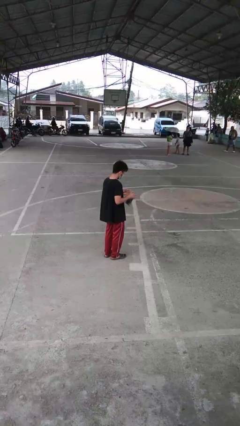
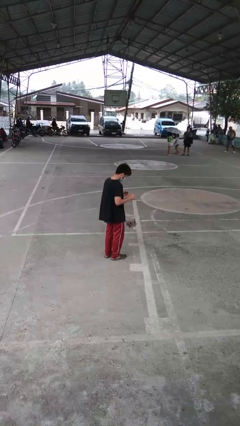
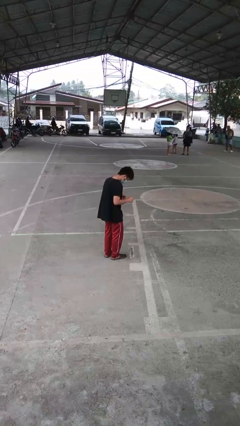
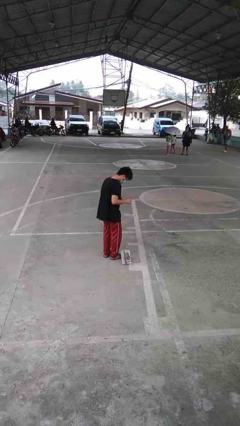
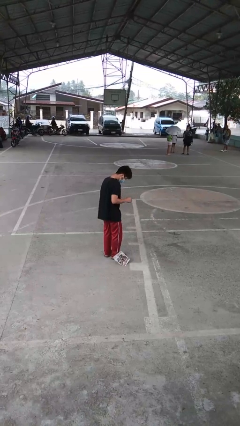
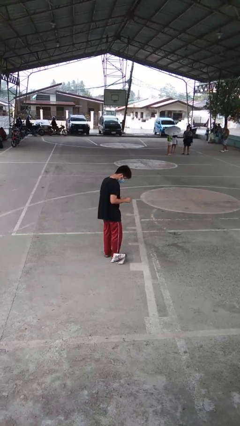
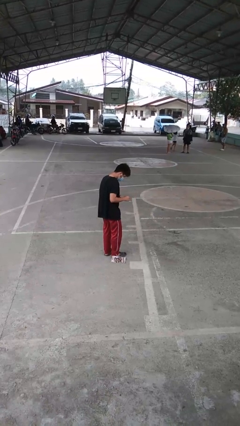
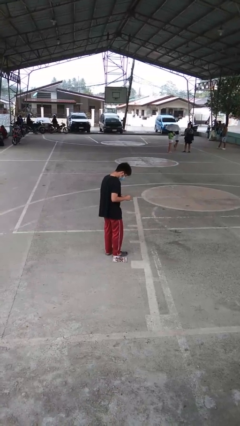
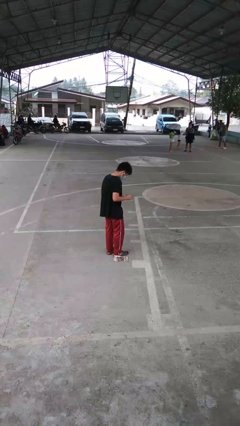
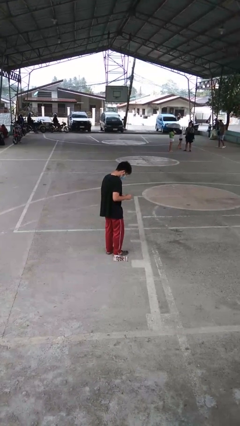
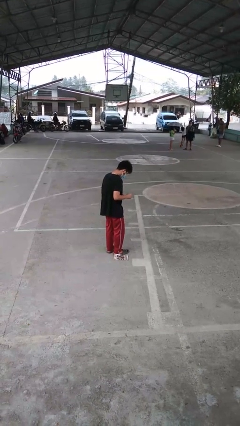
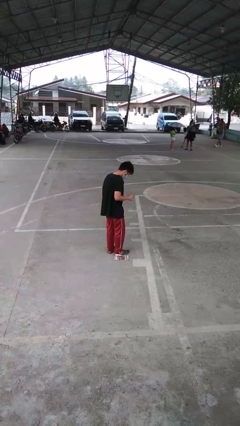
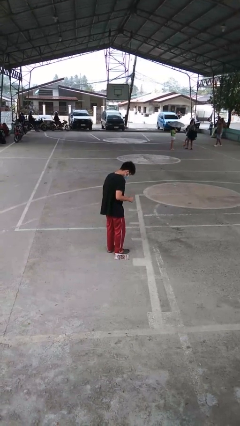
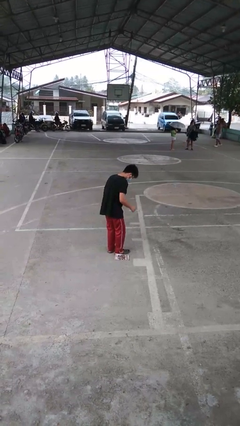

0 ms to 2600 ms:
person drops object

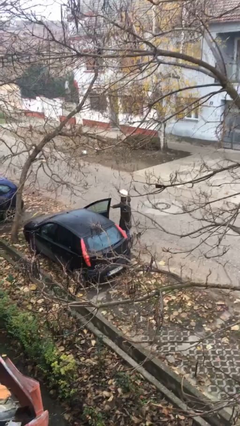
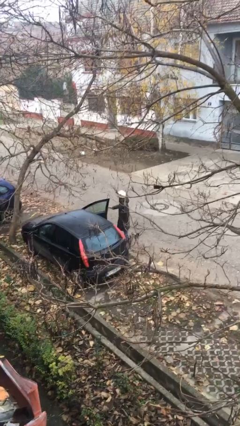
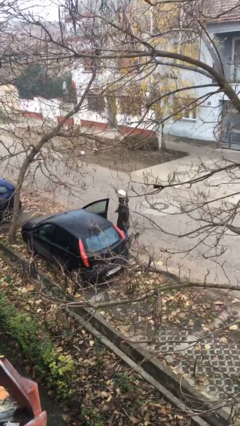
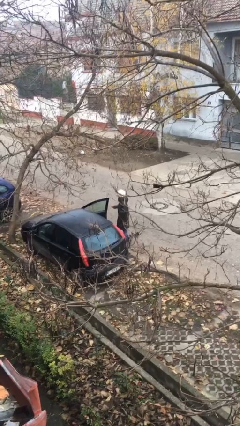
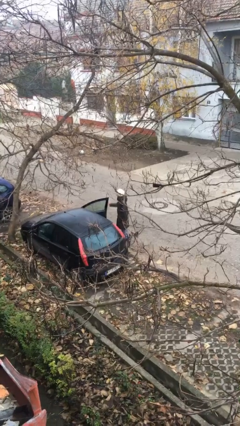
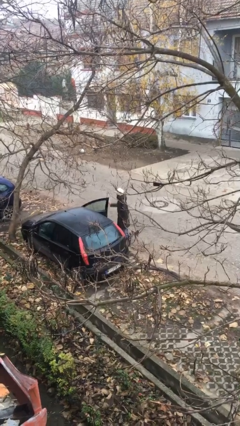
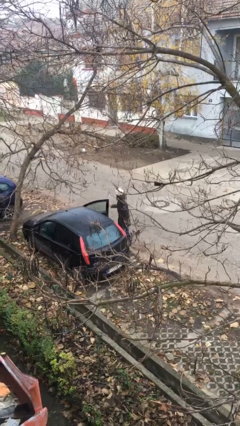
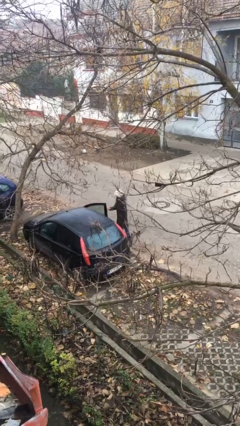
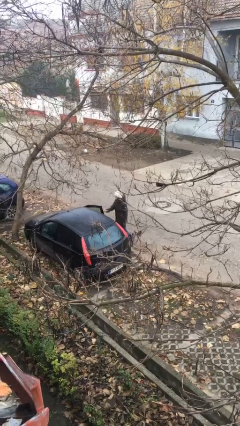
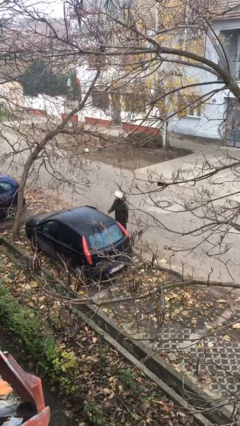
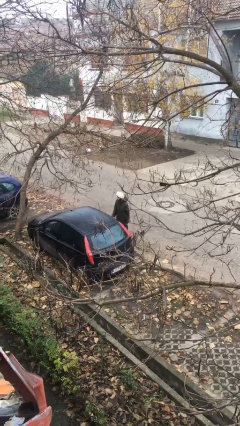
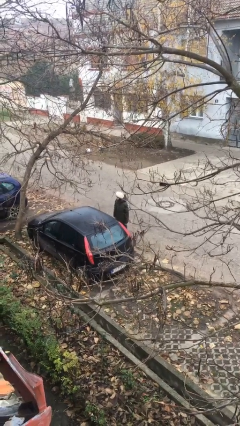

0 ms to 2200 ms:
person closes car door

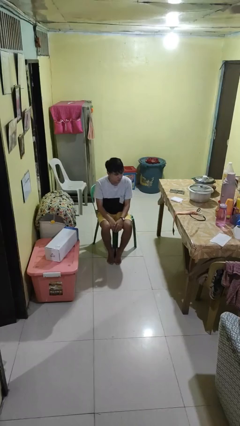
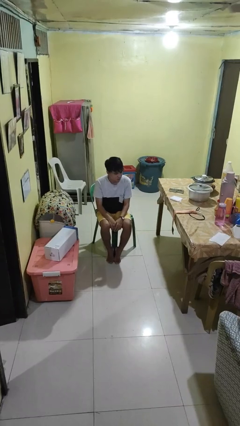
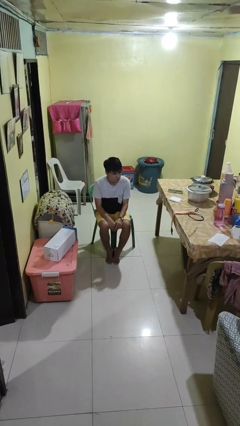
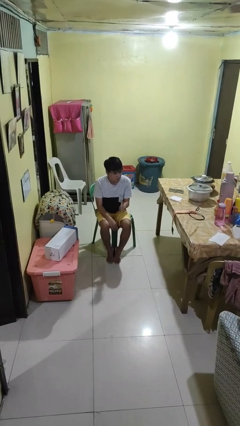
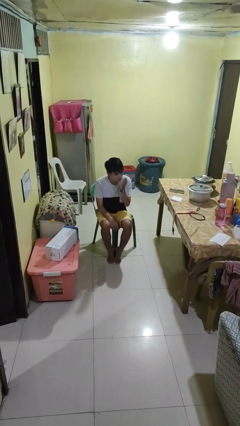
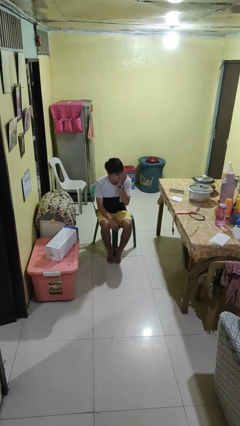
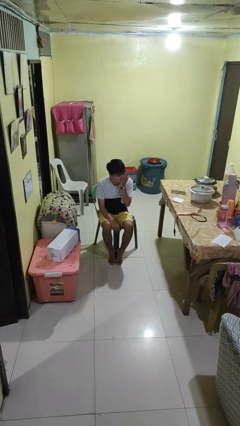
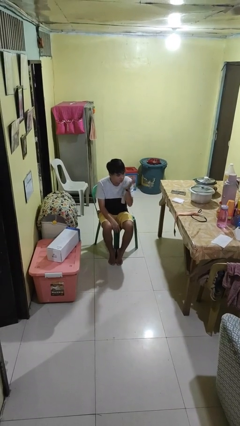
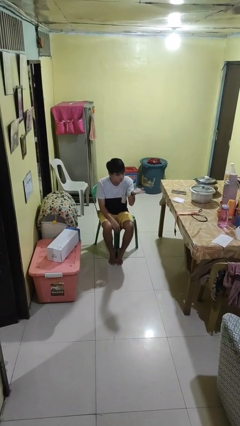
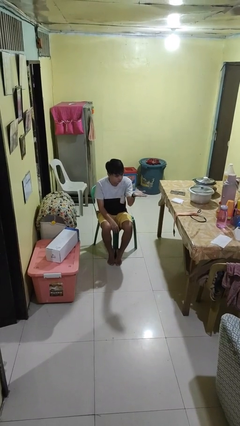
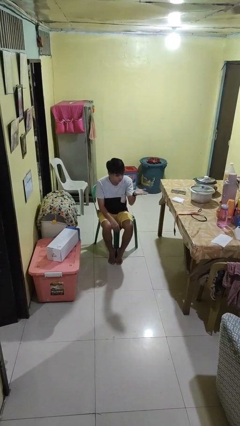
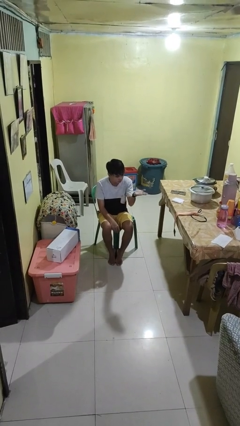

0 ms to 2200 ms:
person gestures blow kiss

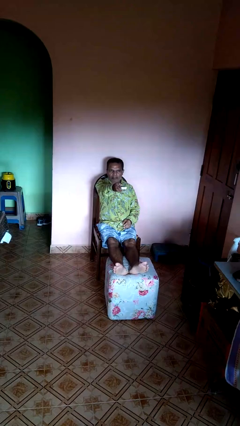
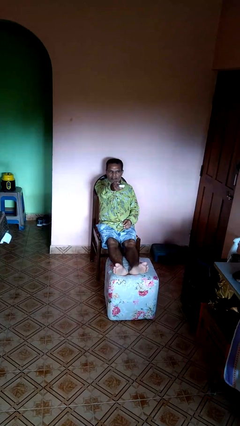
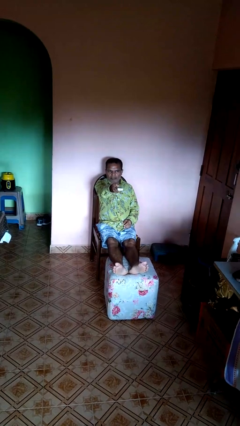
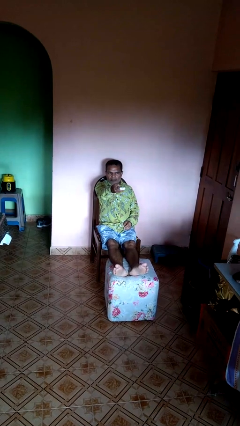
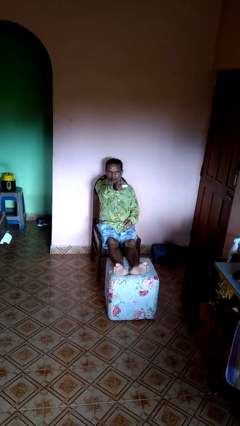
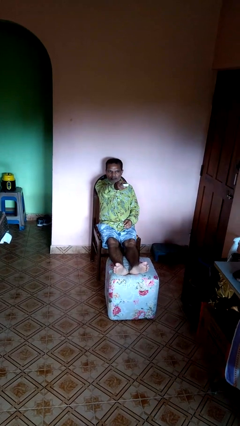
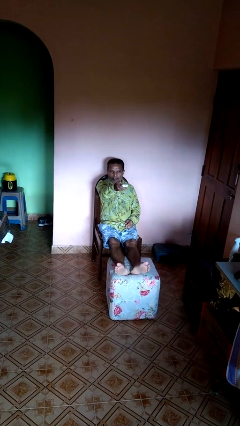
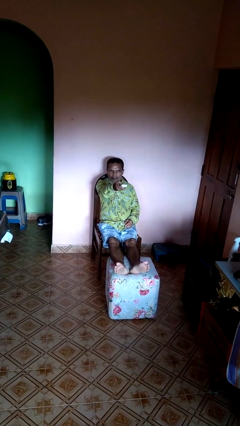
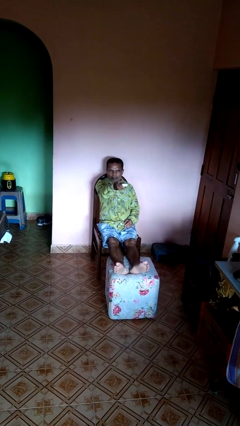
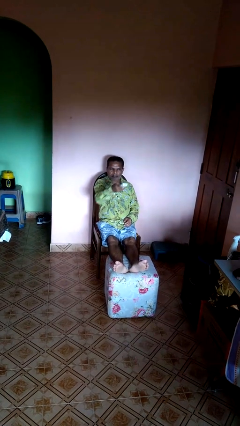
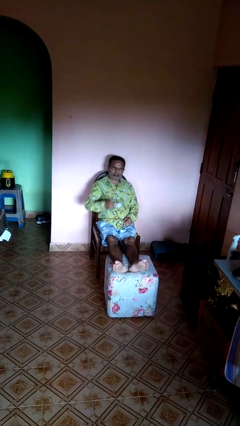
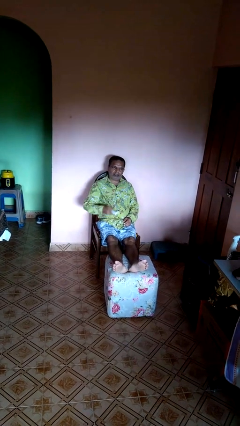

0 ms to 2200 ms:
person uses television remote

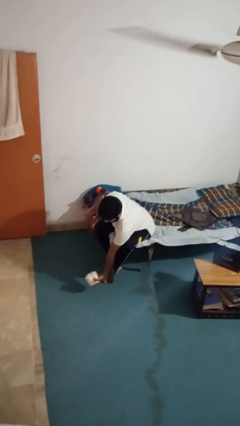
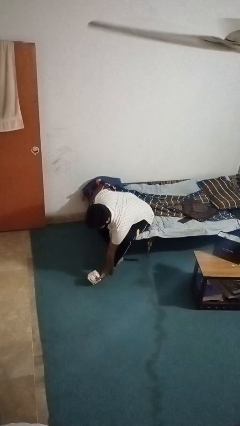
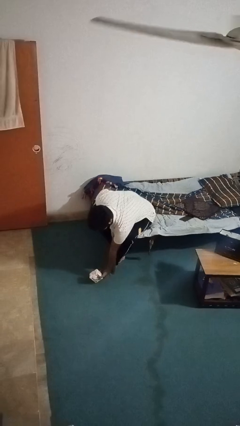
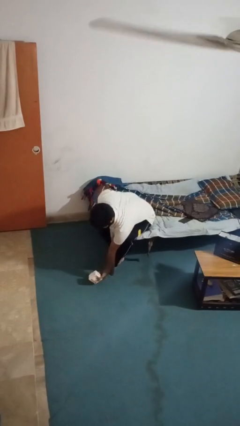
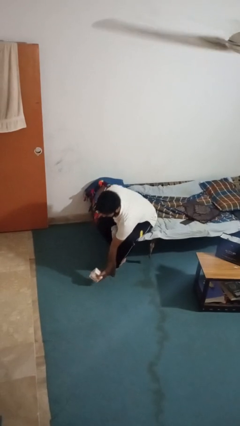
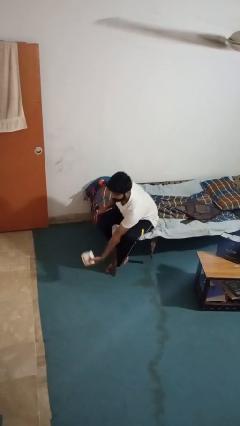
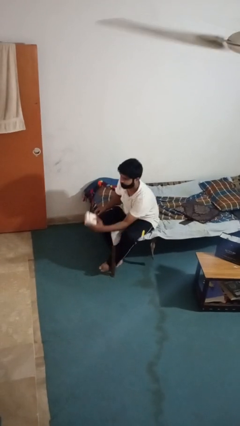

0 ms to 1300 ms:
person catches dropped object

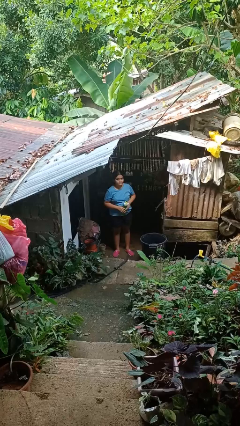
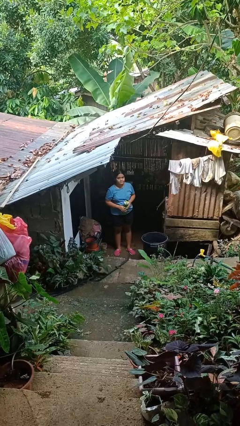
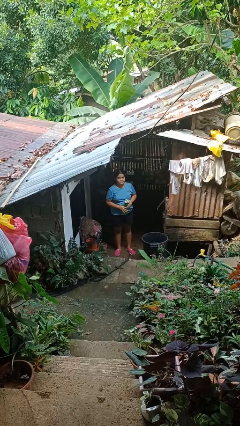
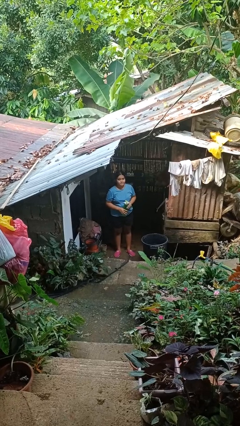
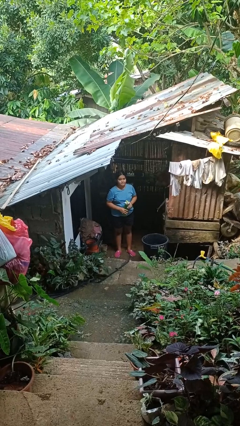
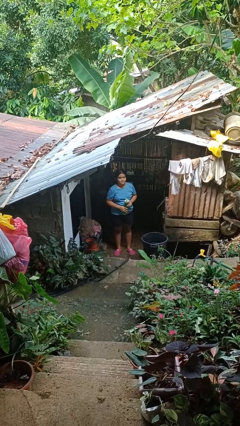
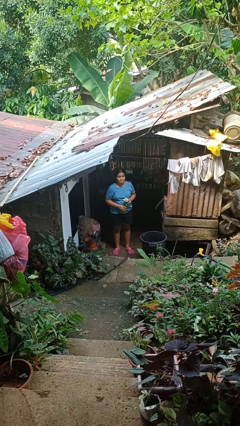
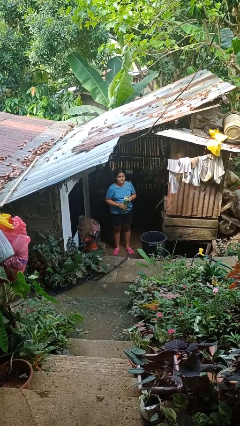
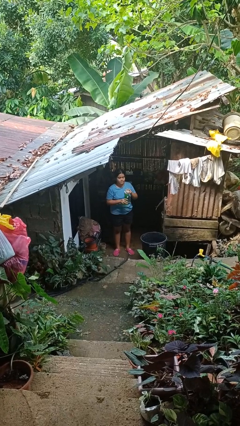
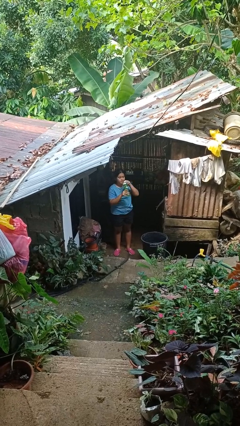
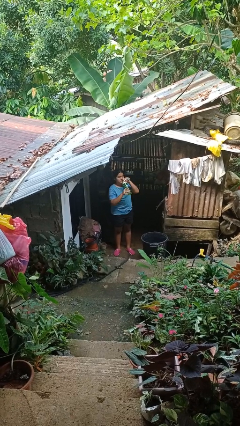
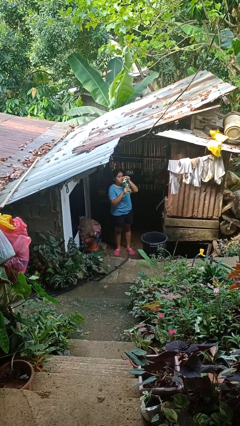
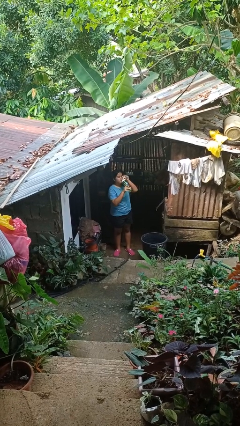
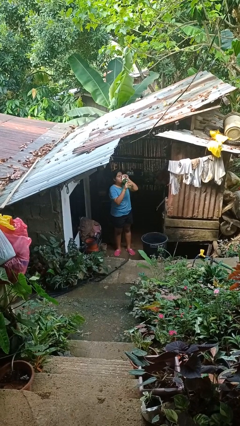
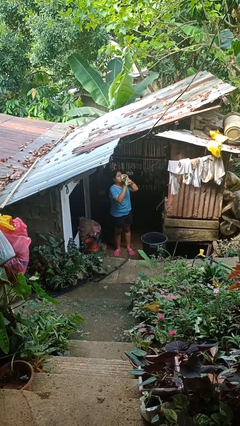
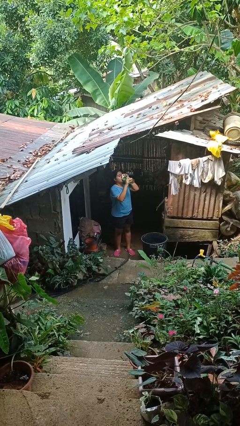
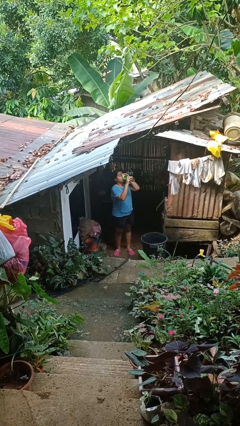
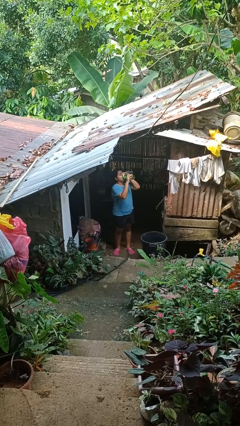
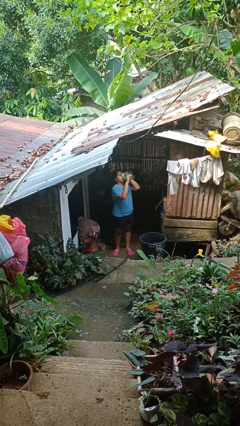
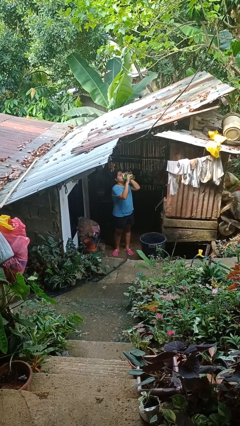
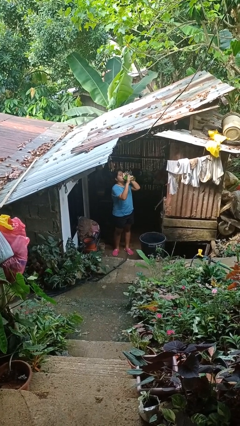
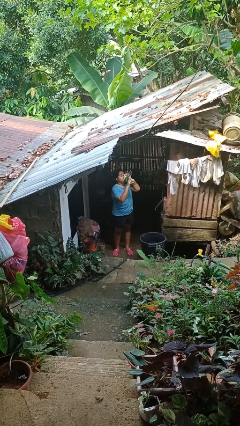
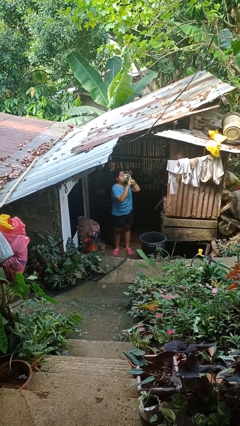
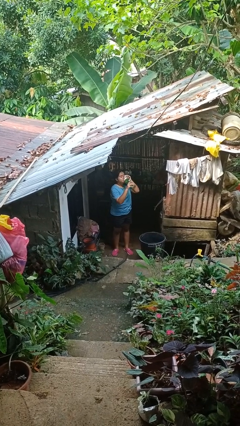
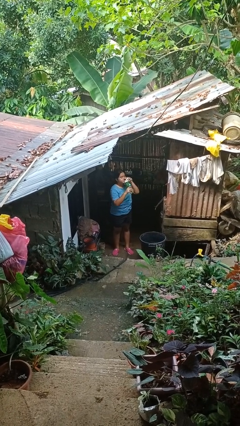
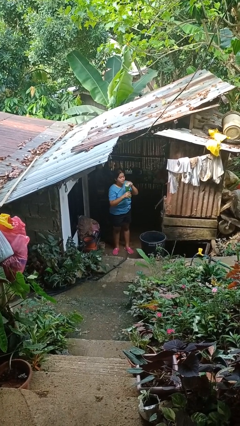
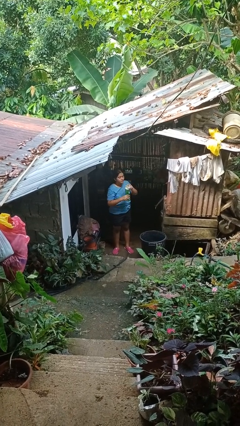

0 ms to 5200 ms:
person drinks from bottle

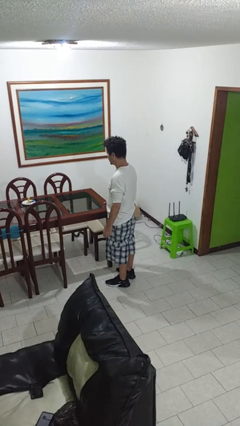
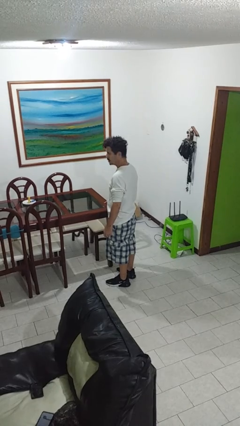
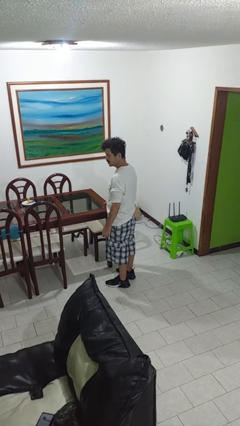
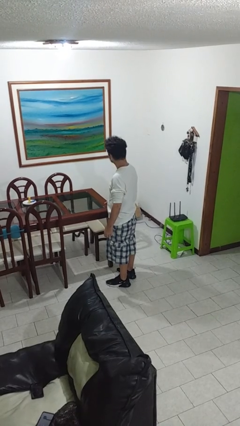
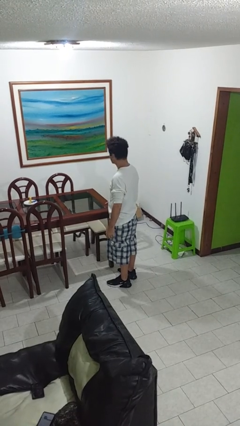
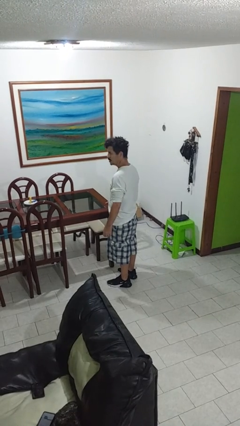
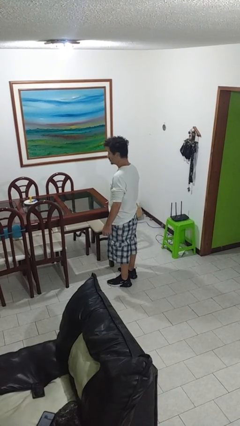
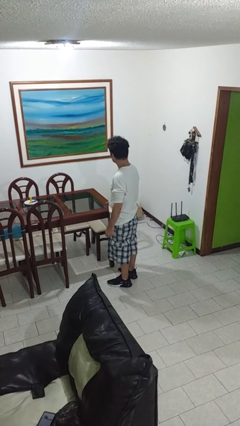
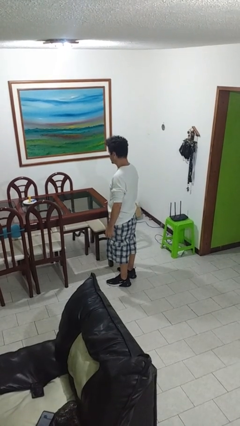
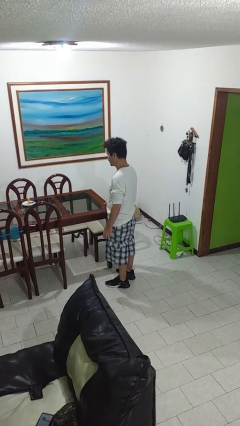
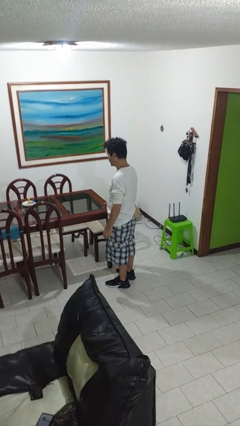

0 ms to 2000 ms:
person shakes head
